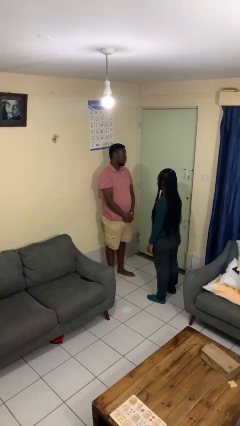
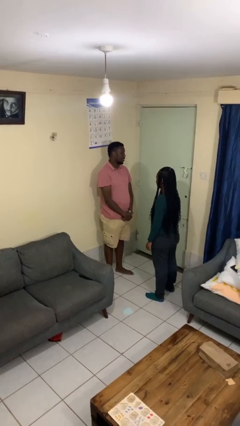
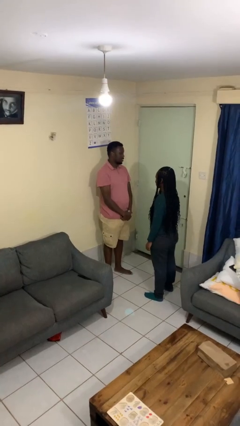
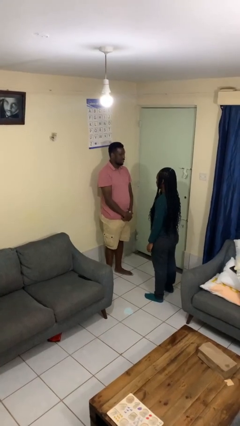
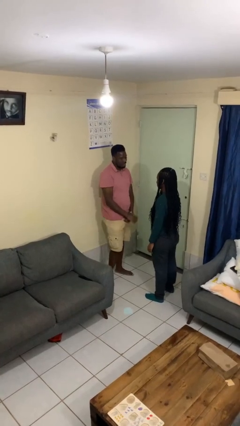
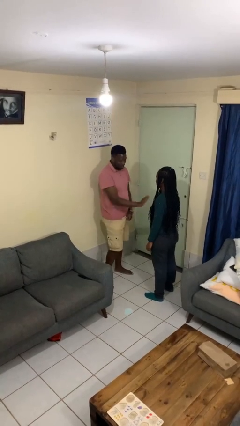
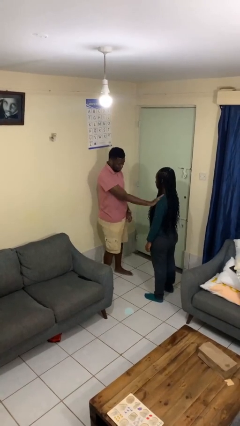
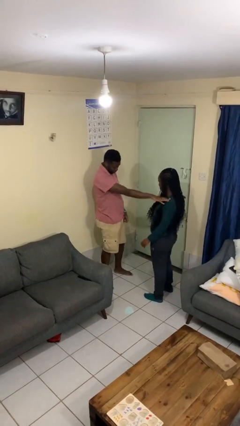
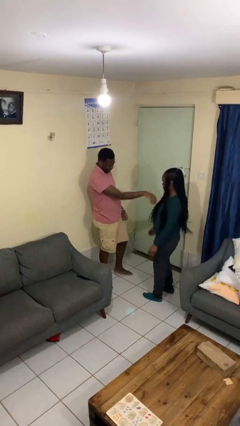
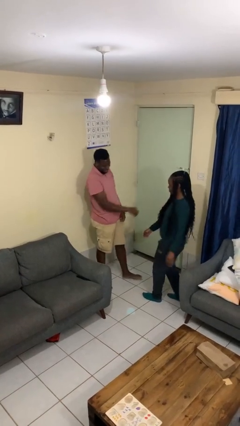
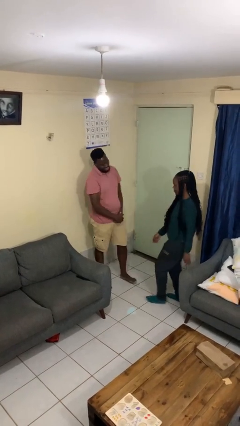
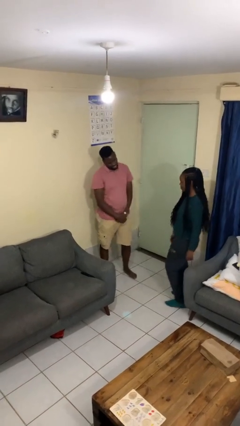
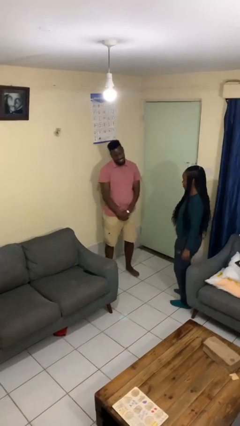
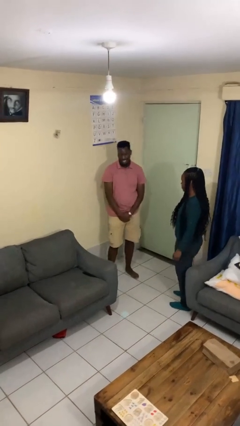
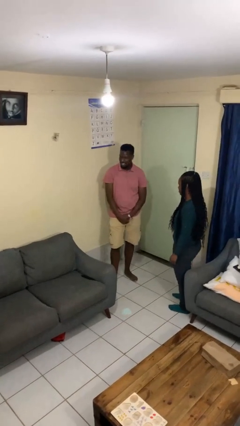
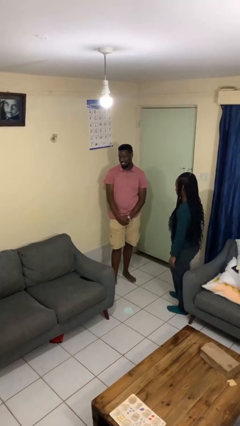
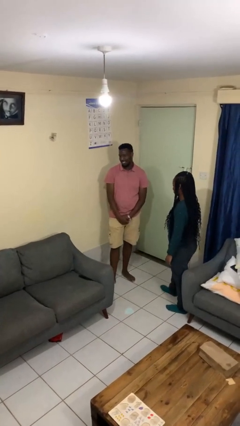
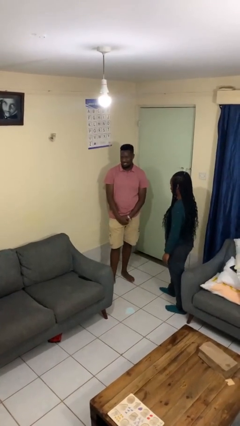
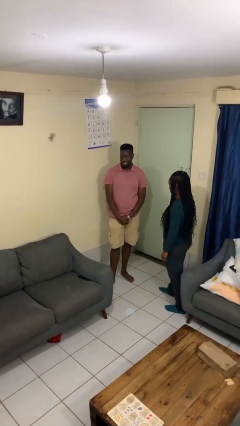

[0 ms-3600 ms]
person shoves person

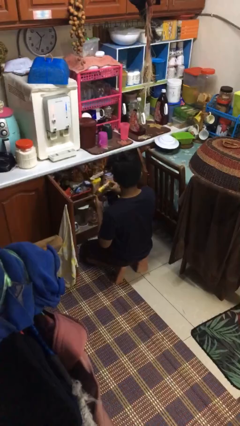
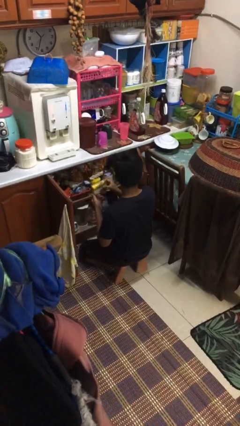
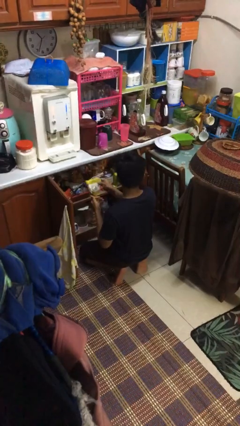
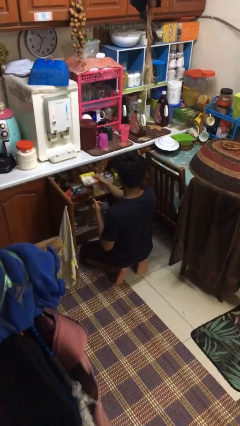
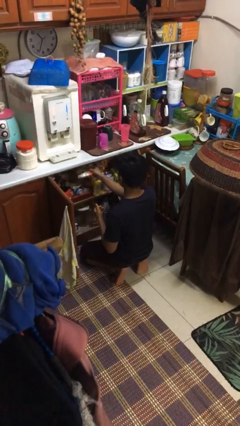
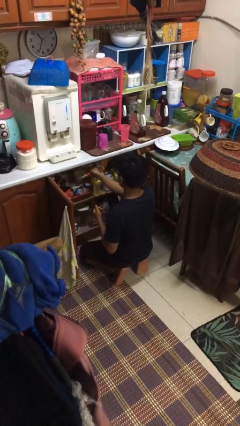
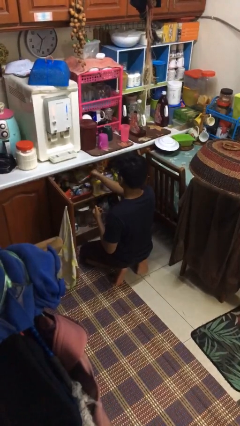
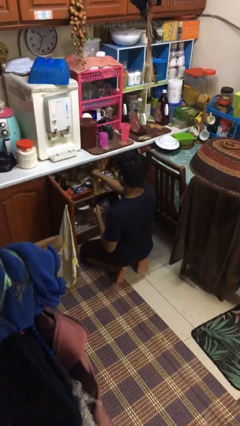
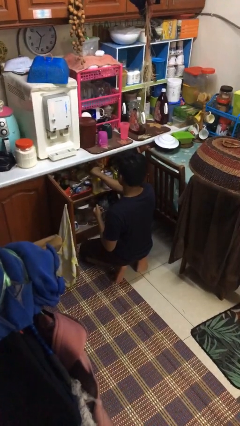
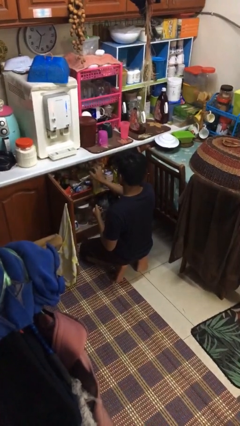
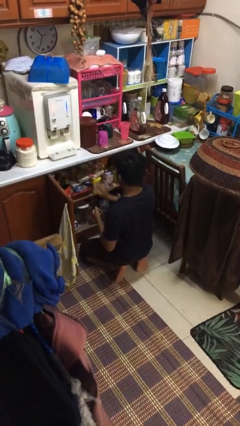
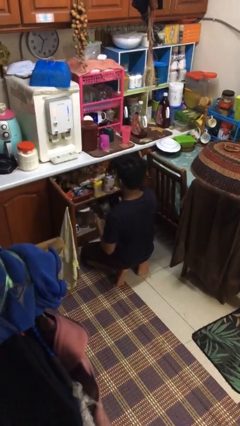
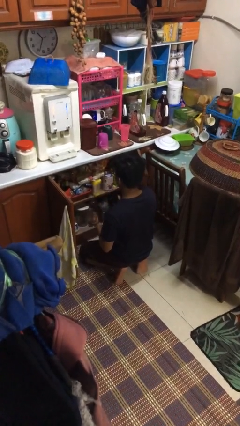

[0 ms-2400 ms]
person puts object in cabinet

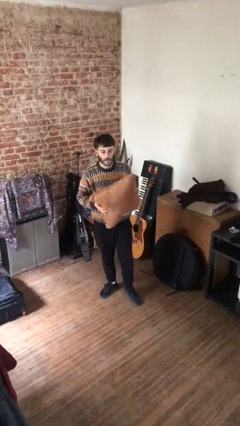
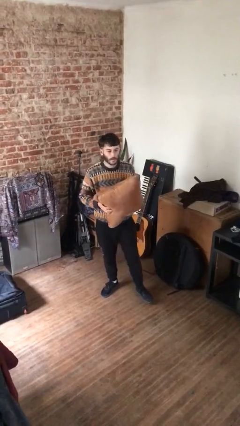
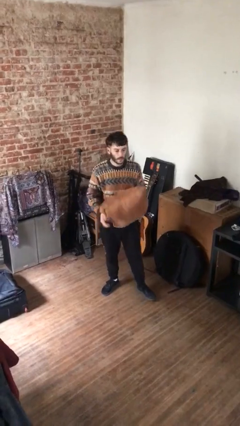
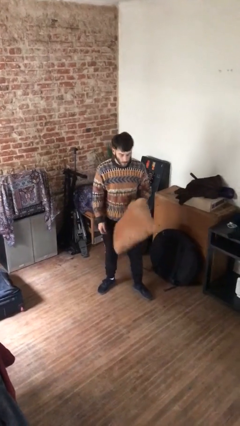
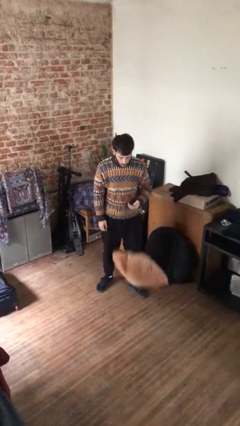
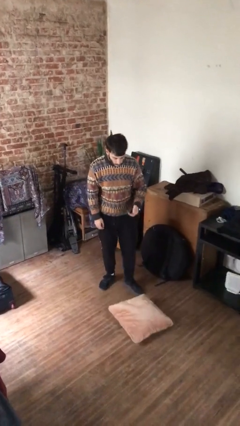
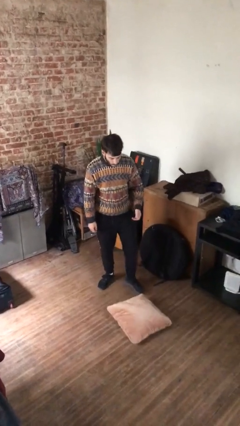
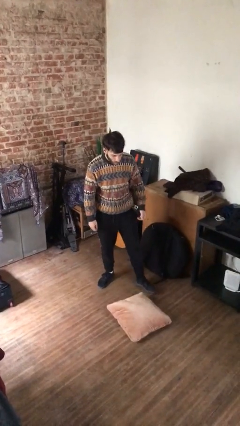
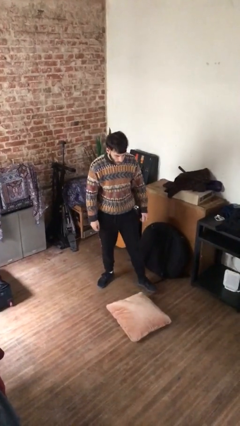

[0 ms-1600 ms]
person drops object

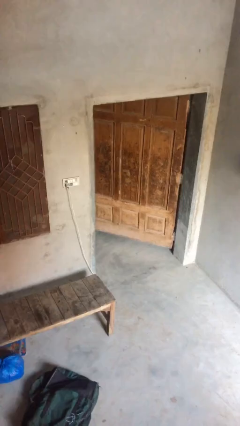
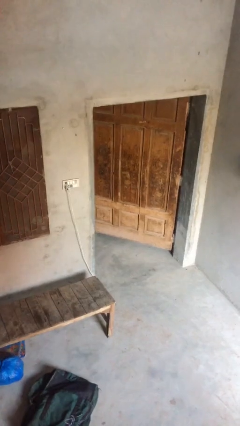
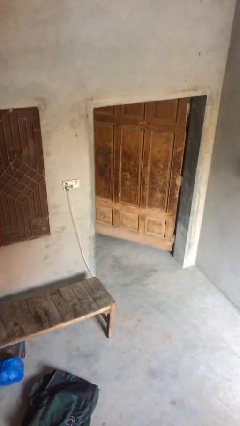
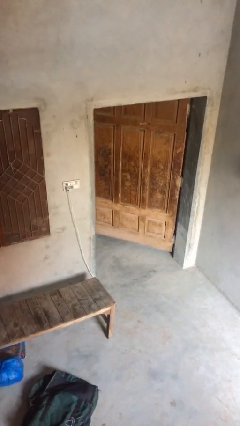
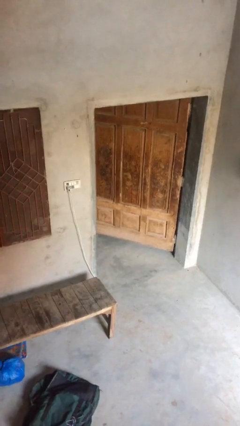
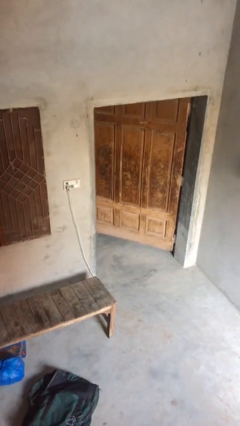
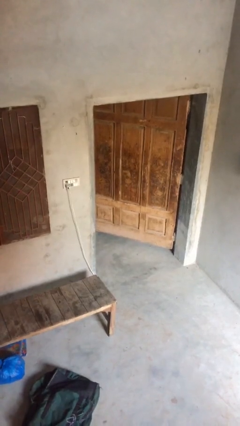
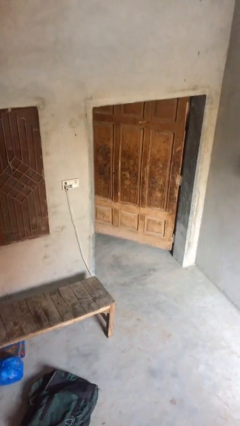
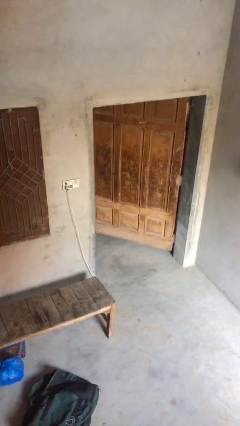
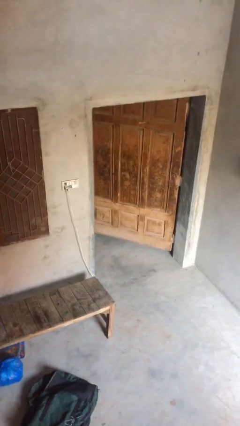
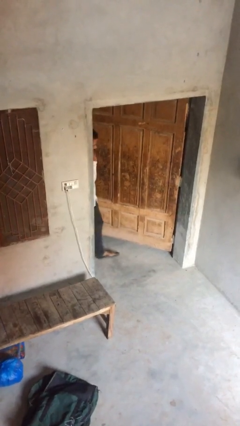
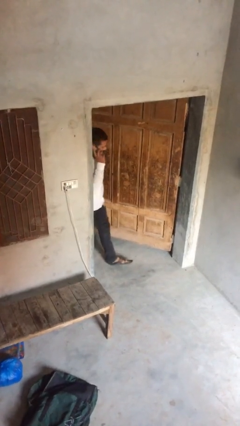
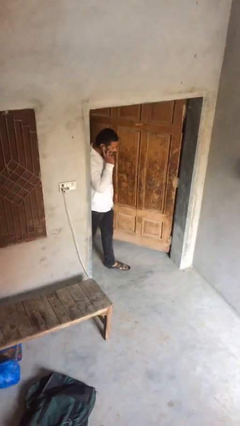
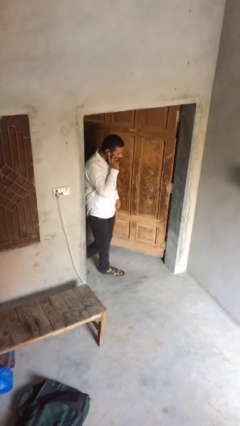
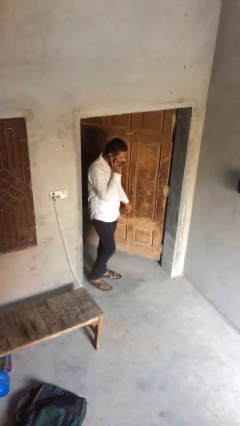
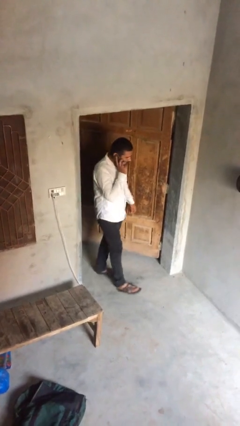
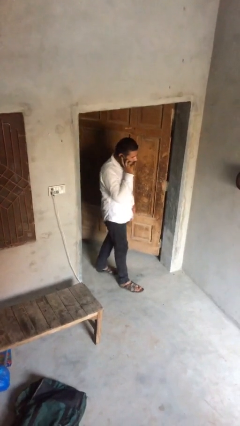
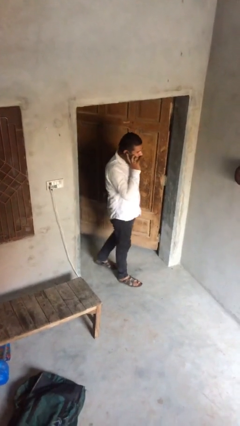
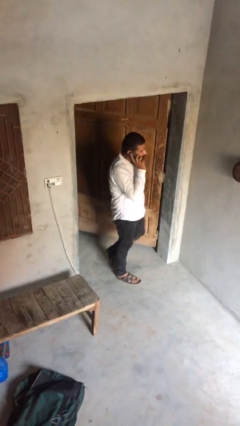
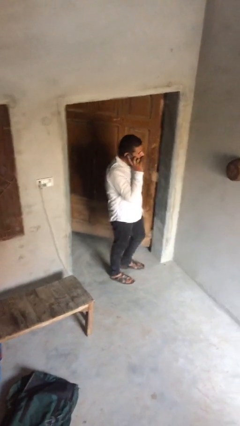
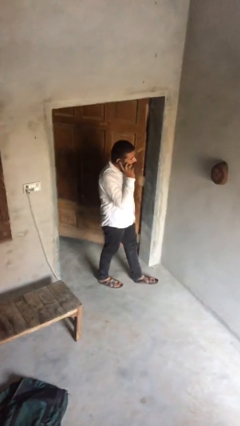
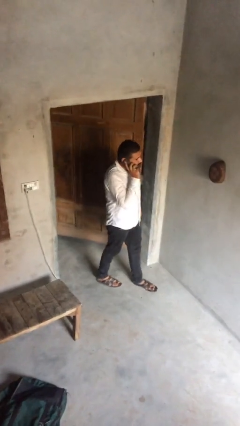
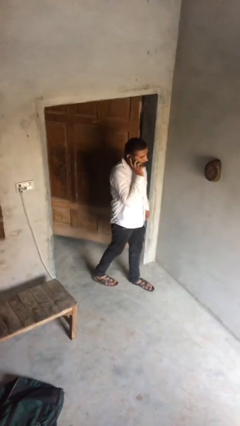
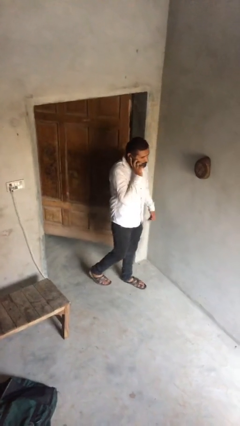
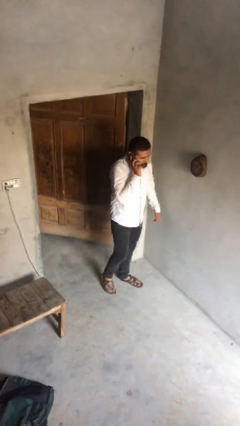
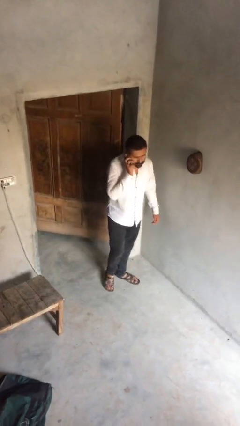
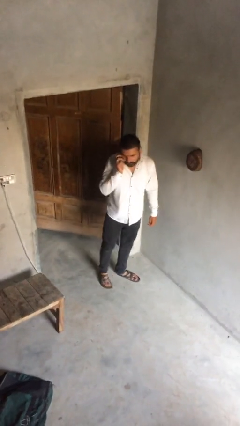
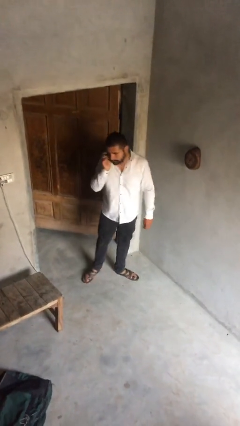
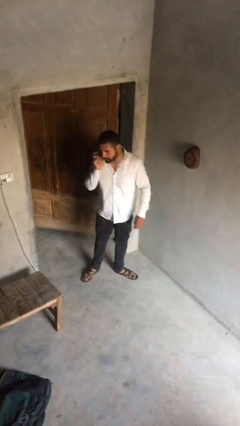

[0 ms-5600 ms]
person enters scene through structure

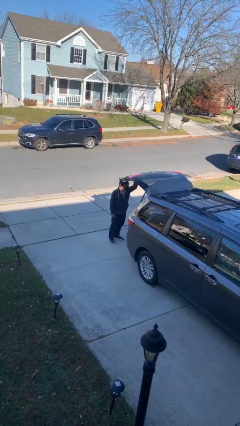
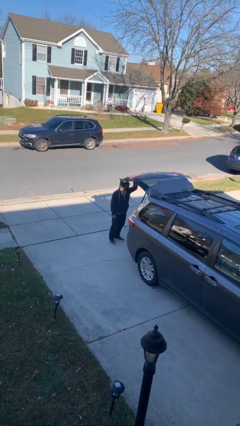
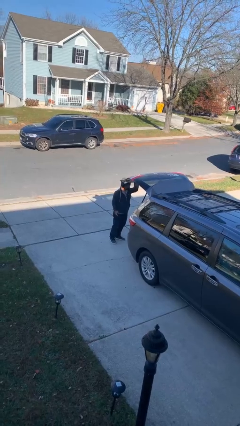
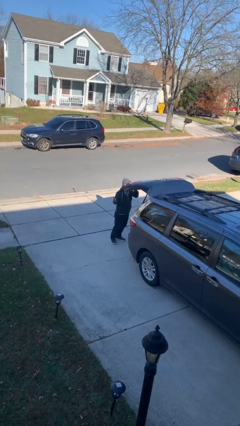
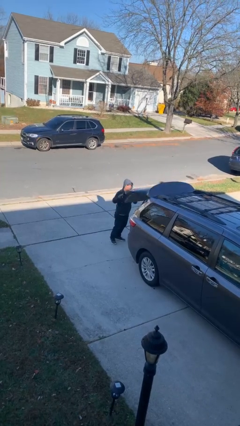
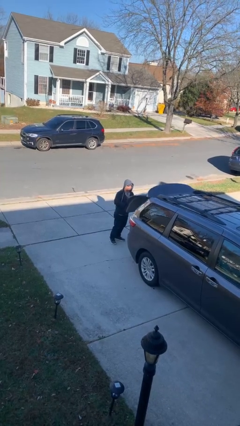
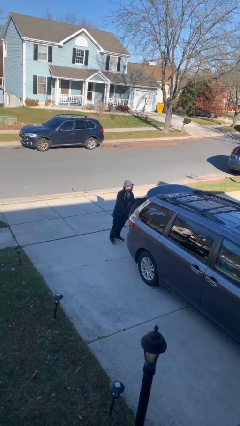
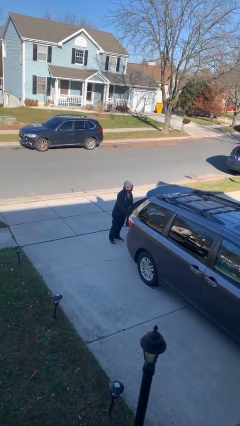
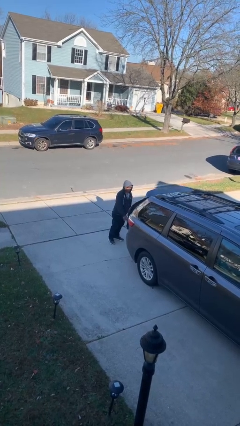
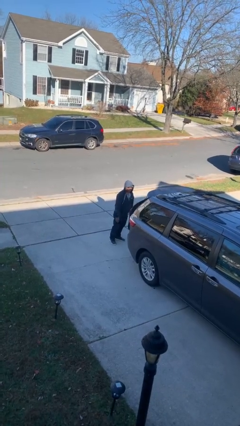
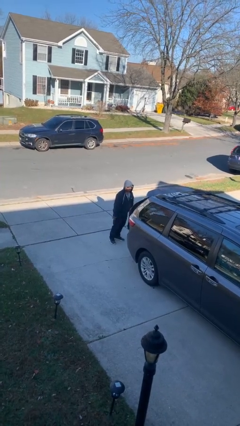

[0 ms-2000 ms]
person closes car trunk

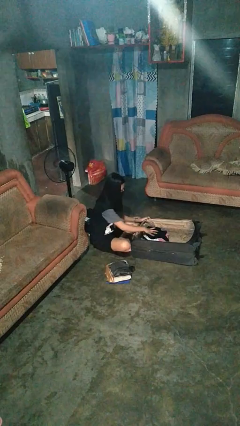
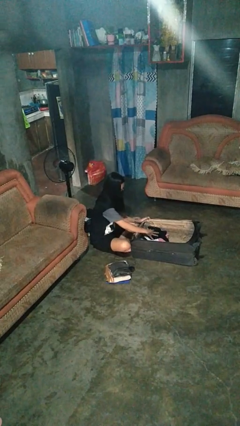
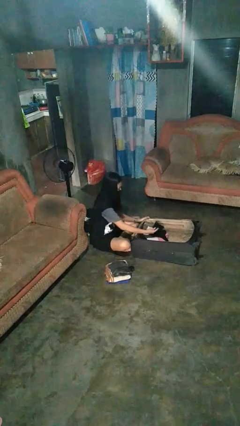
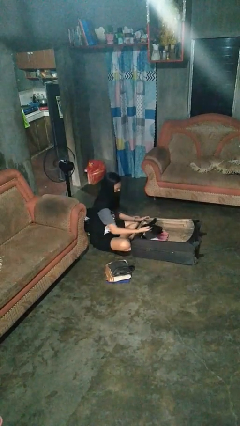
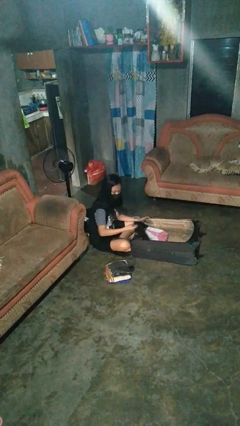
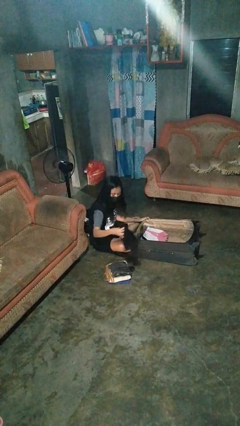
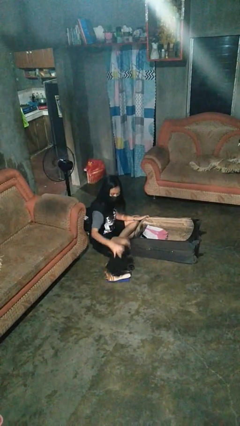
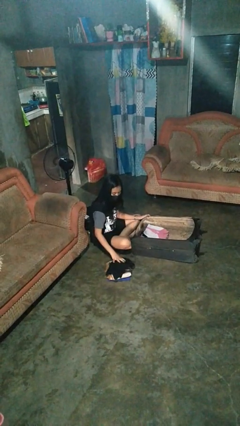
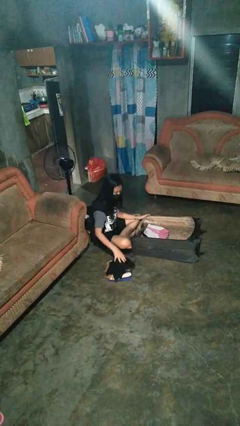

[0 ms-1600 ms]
person unloads clothes from suitcase

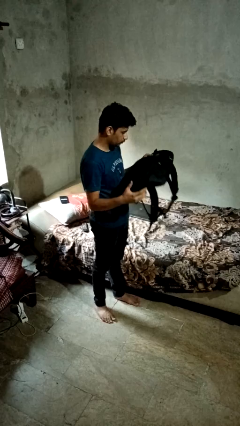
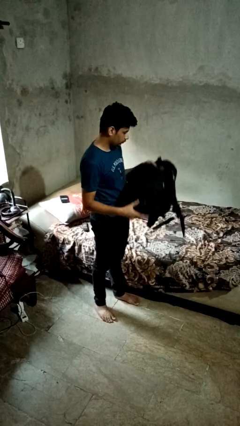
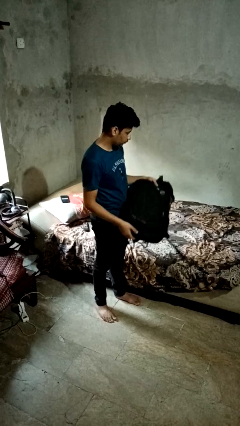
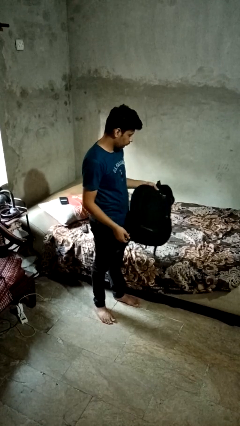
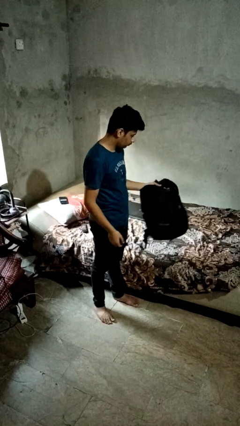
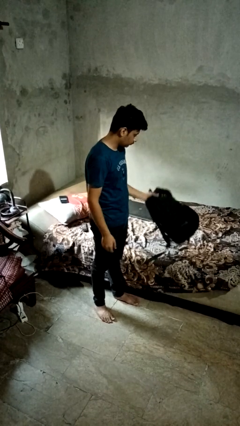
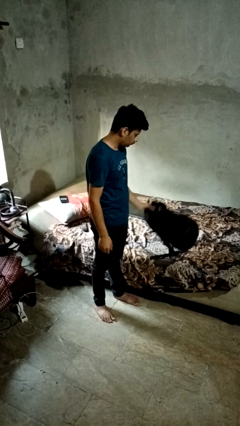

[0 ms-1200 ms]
person puts down object on bed
